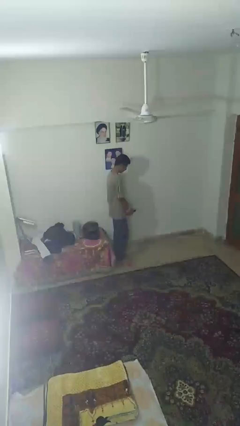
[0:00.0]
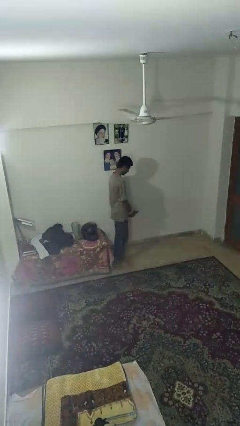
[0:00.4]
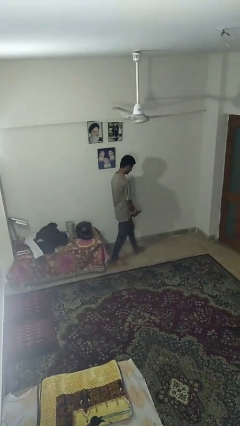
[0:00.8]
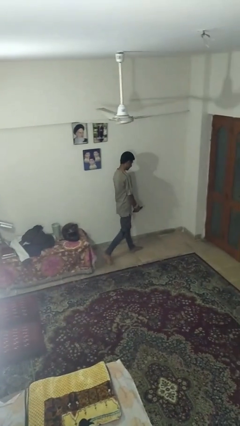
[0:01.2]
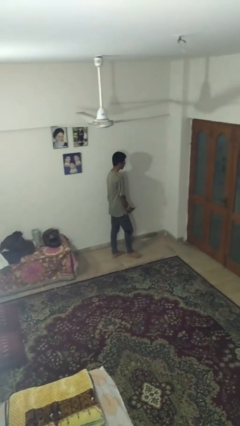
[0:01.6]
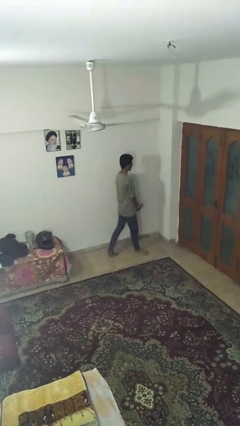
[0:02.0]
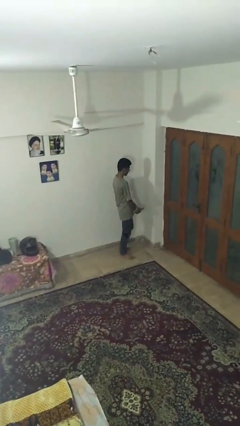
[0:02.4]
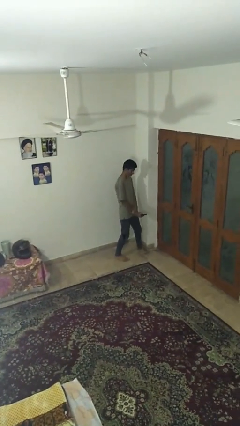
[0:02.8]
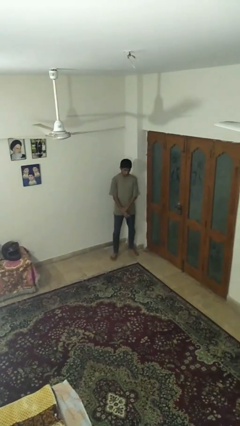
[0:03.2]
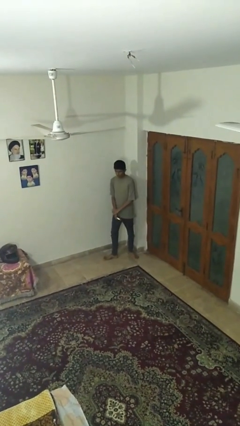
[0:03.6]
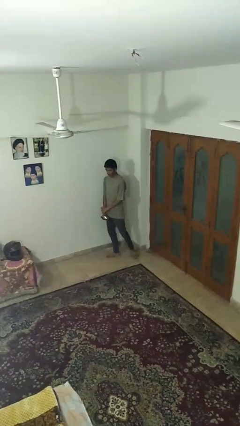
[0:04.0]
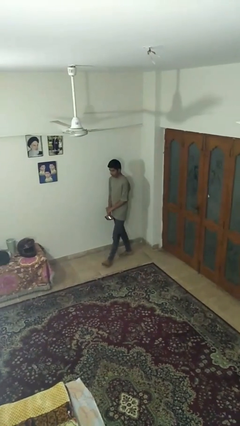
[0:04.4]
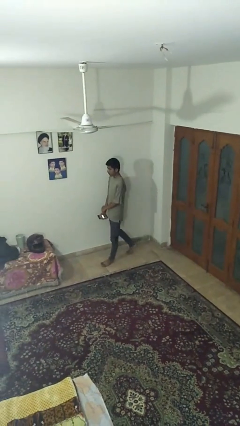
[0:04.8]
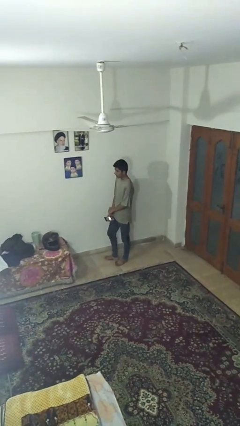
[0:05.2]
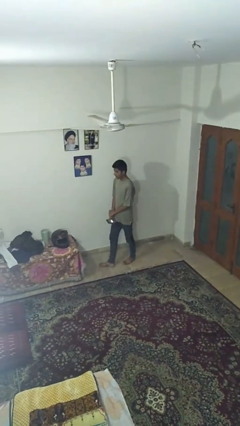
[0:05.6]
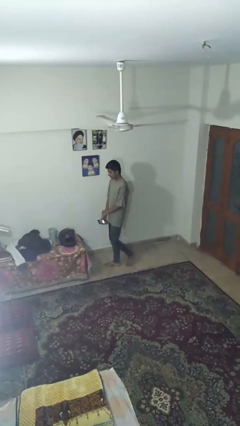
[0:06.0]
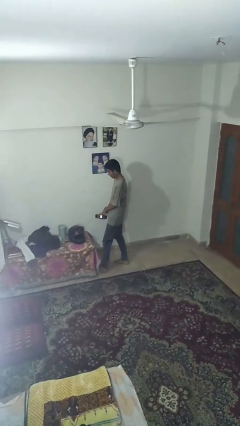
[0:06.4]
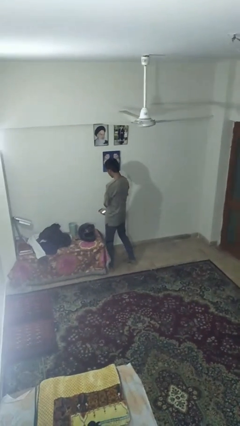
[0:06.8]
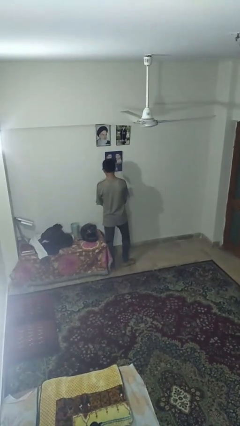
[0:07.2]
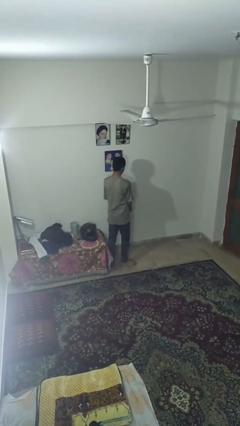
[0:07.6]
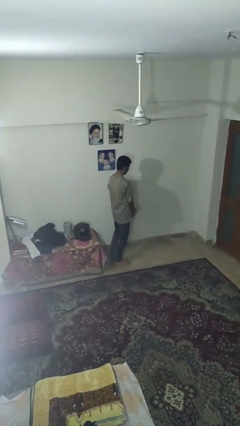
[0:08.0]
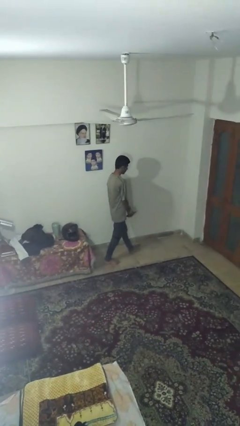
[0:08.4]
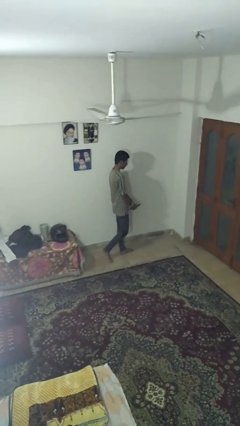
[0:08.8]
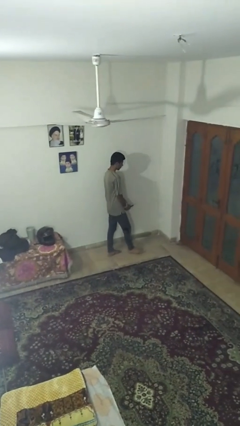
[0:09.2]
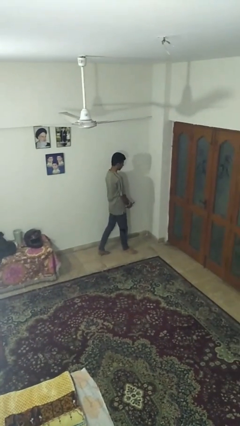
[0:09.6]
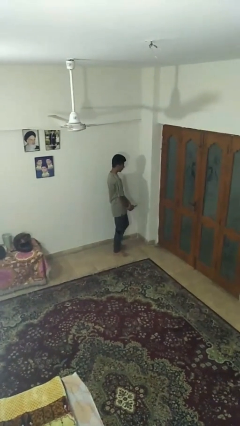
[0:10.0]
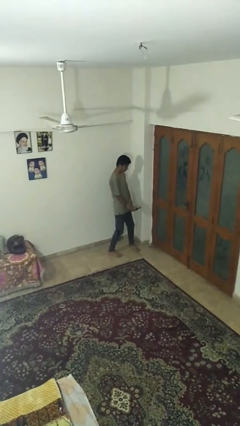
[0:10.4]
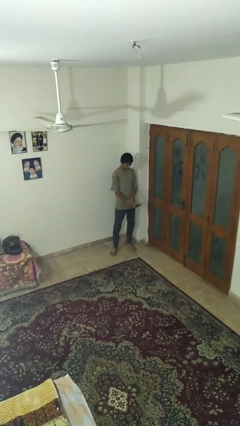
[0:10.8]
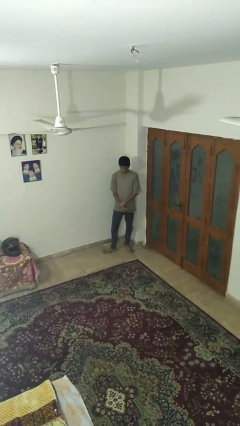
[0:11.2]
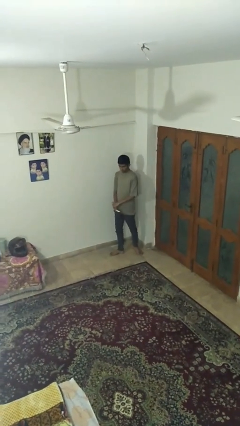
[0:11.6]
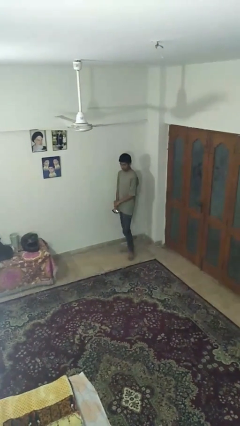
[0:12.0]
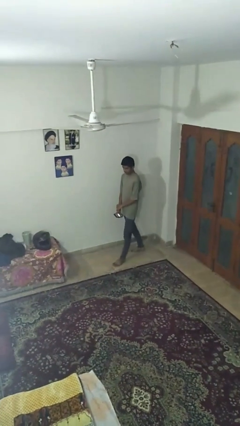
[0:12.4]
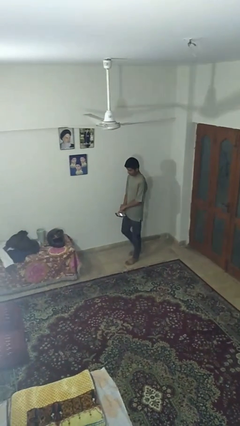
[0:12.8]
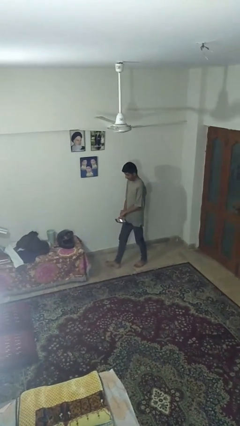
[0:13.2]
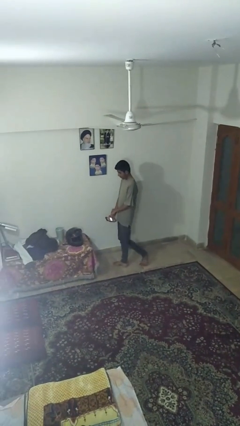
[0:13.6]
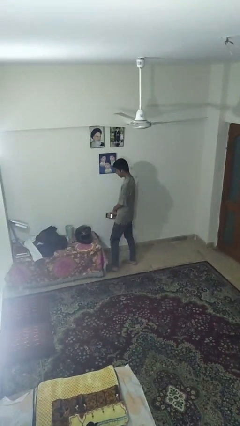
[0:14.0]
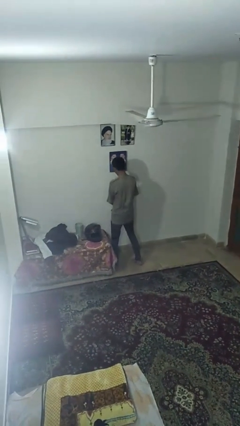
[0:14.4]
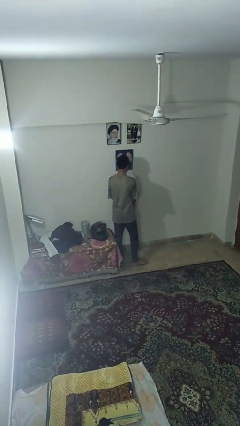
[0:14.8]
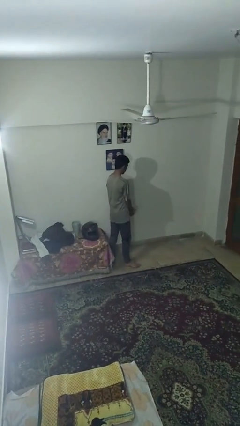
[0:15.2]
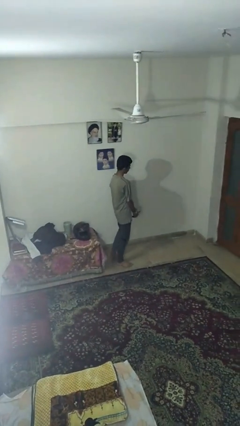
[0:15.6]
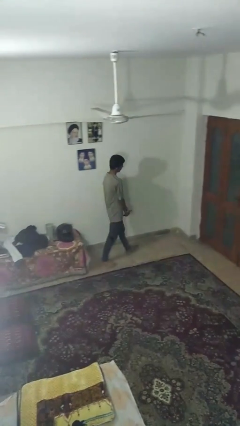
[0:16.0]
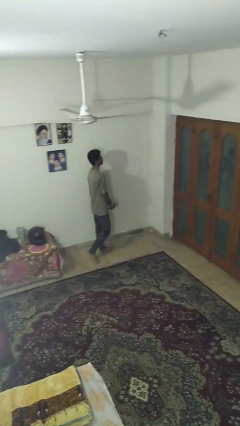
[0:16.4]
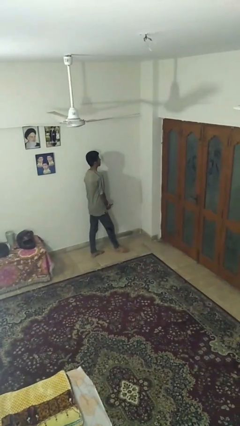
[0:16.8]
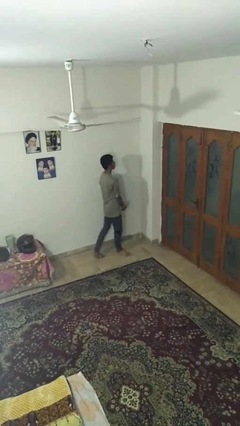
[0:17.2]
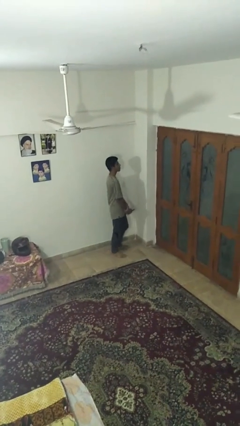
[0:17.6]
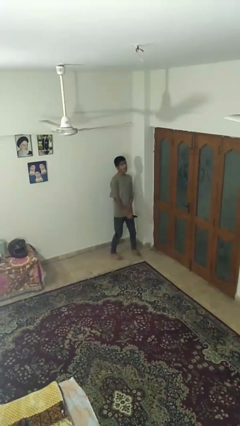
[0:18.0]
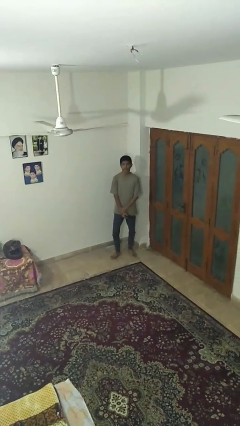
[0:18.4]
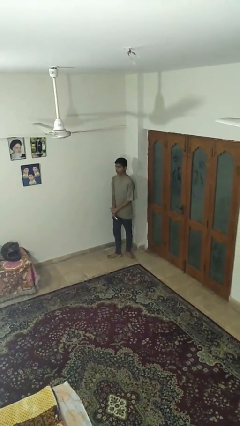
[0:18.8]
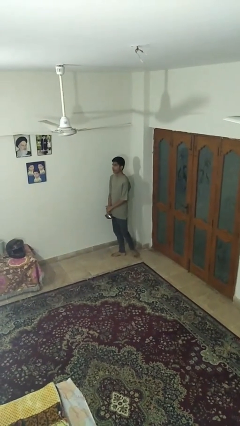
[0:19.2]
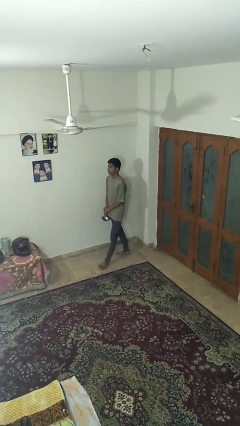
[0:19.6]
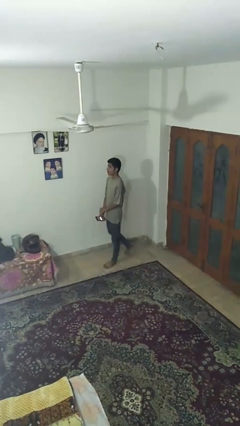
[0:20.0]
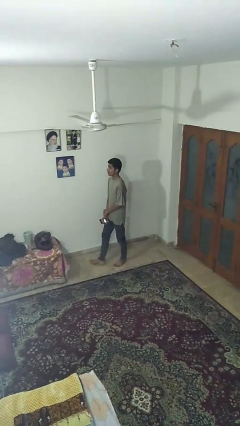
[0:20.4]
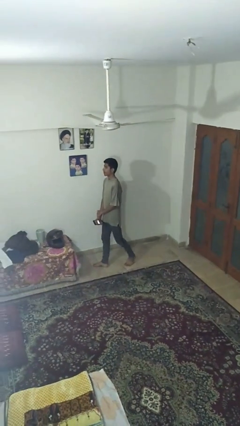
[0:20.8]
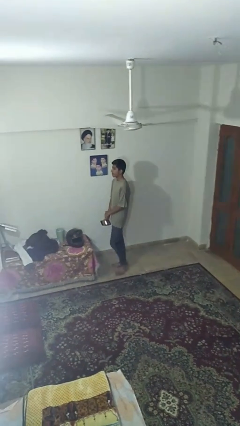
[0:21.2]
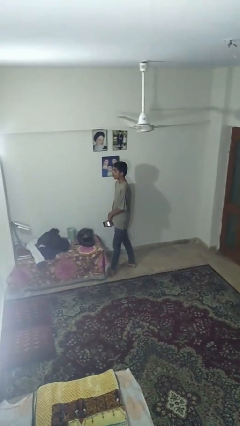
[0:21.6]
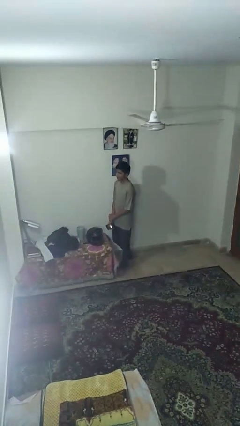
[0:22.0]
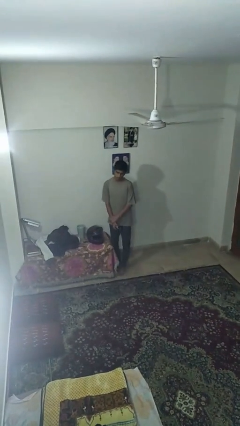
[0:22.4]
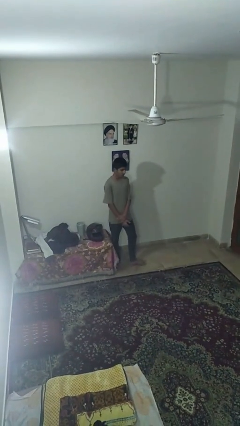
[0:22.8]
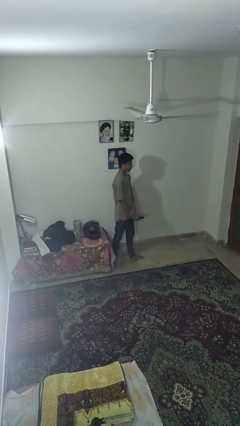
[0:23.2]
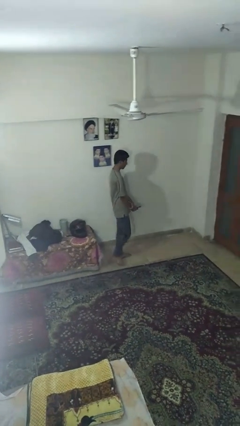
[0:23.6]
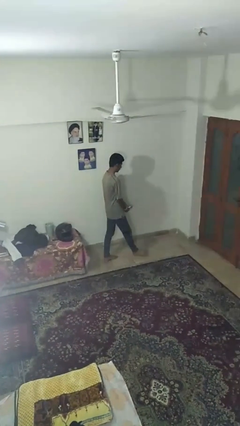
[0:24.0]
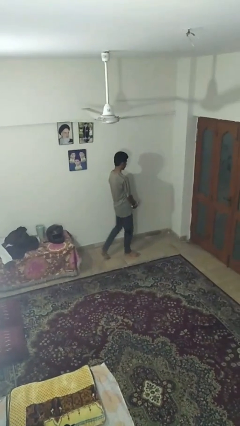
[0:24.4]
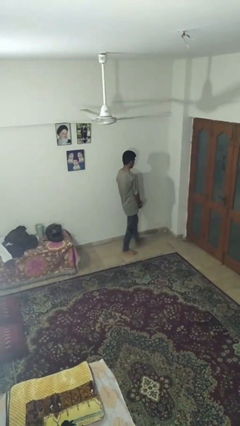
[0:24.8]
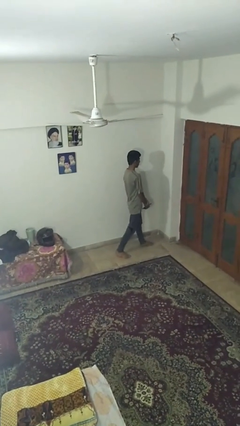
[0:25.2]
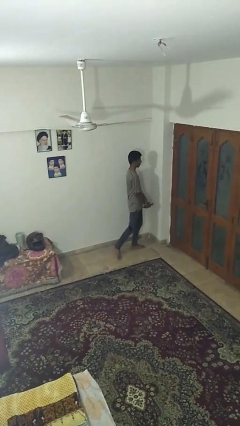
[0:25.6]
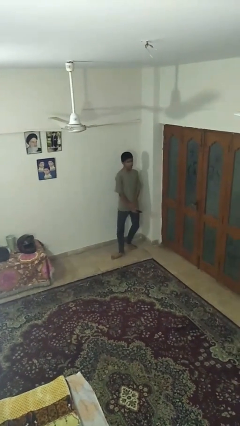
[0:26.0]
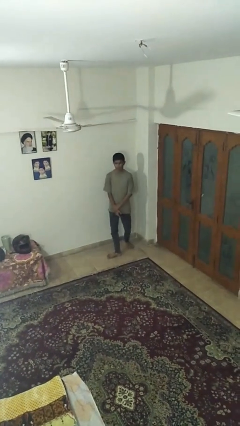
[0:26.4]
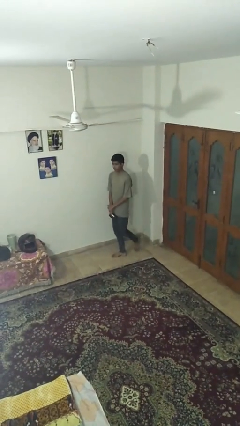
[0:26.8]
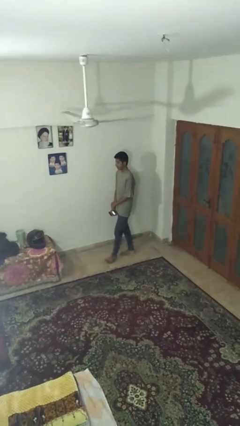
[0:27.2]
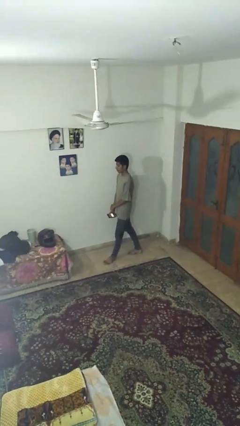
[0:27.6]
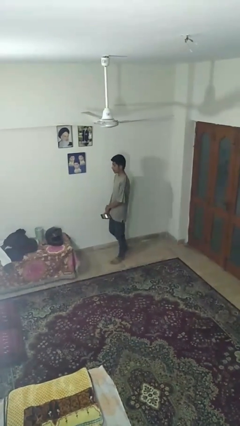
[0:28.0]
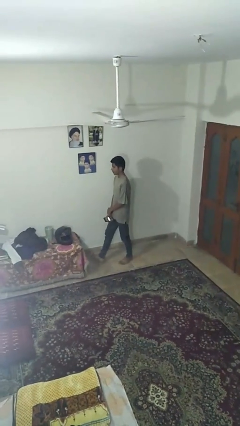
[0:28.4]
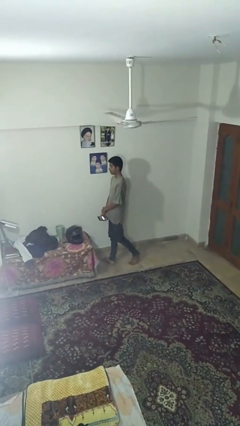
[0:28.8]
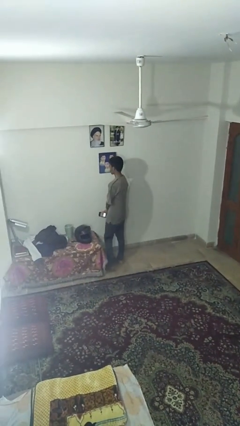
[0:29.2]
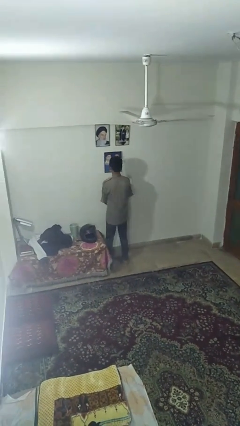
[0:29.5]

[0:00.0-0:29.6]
person walks

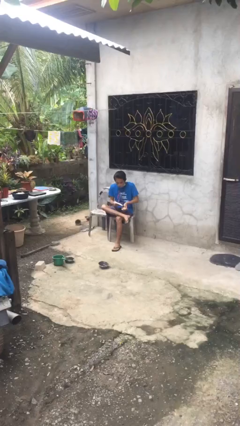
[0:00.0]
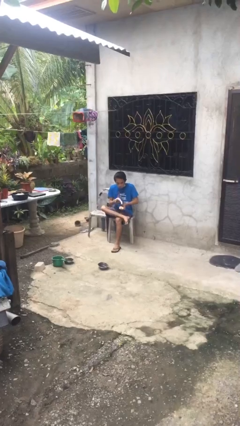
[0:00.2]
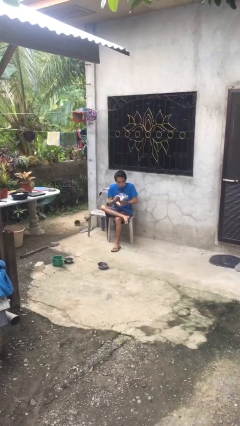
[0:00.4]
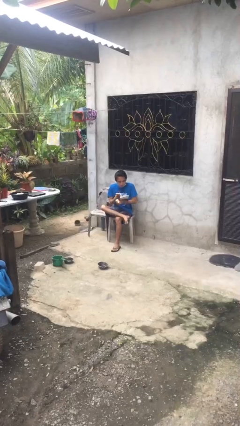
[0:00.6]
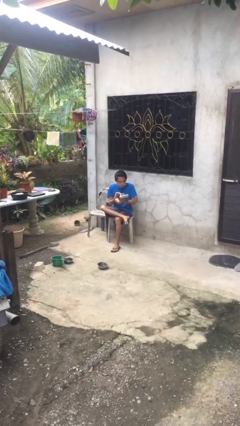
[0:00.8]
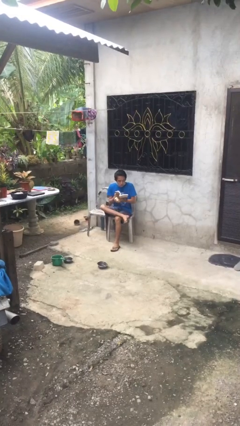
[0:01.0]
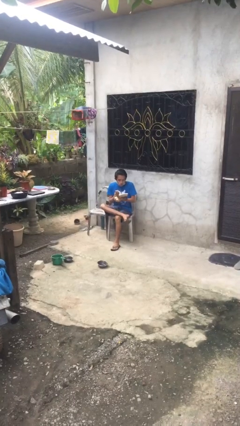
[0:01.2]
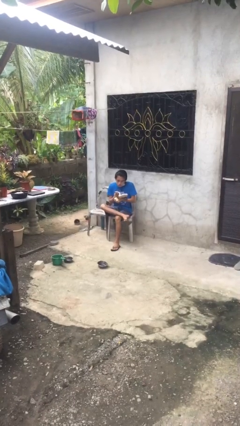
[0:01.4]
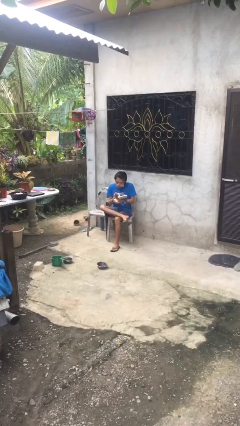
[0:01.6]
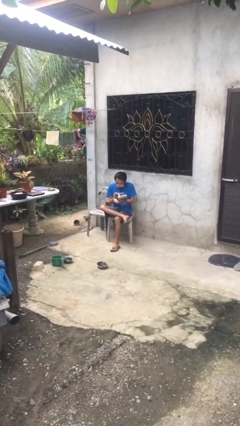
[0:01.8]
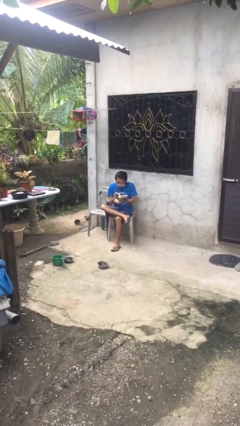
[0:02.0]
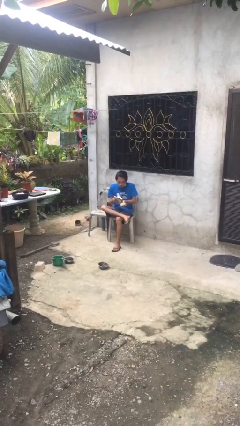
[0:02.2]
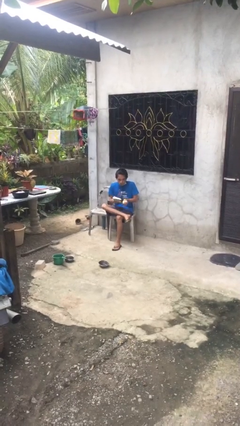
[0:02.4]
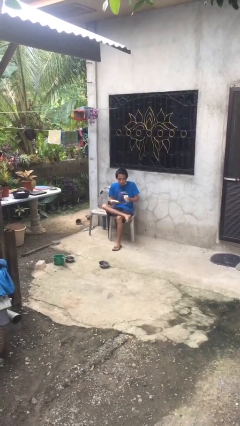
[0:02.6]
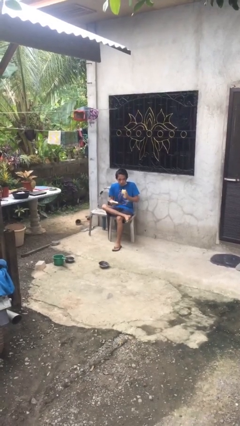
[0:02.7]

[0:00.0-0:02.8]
person reads document

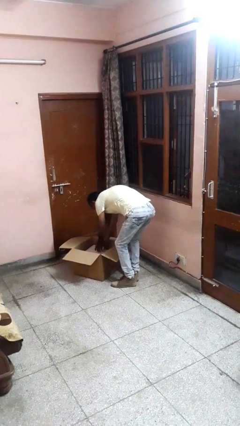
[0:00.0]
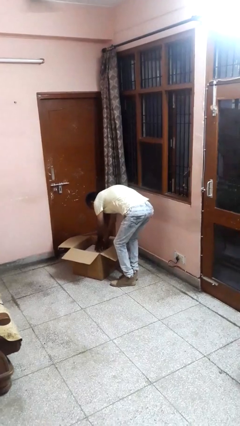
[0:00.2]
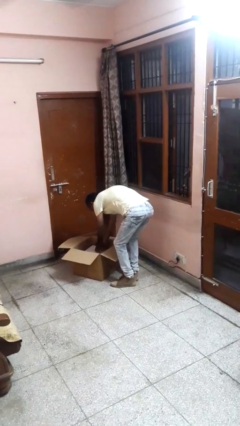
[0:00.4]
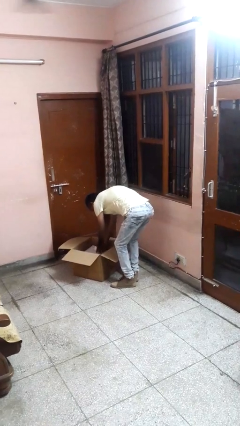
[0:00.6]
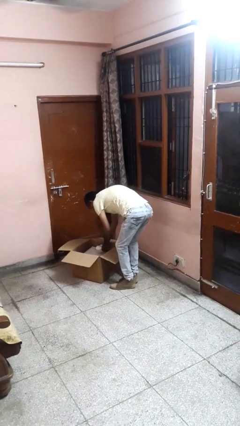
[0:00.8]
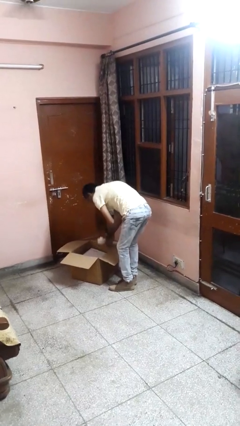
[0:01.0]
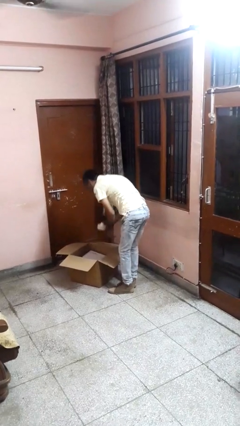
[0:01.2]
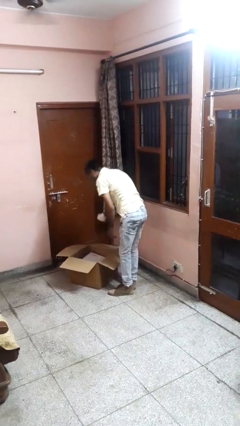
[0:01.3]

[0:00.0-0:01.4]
person takes object from box
